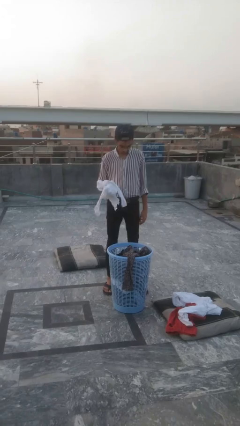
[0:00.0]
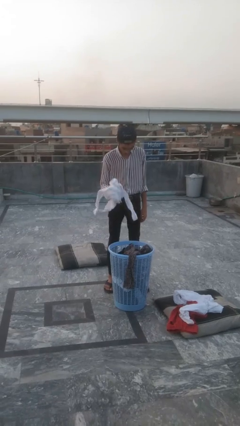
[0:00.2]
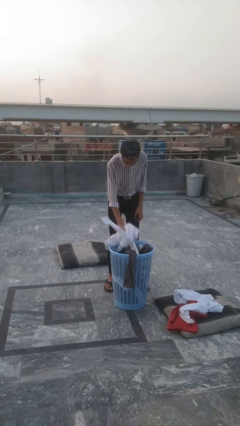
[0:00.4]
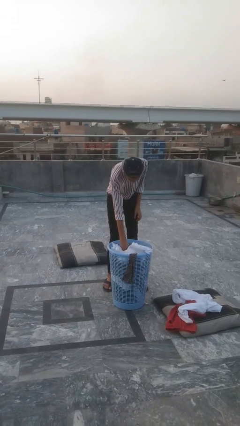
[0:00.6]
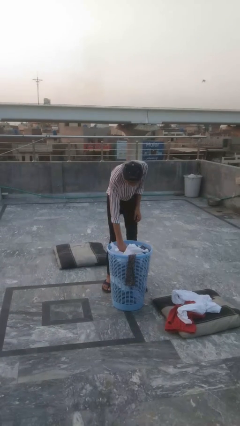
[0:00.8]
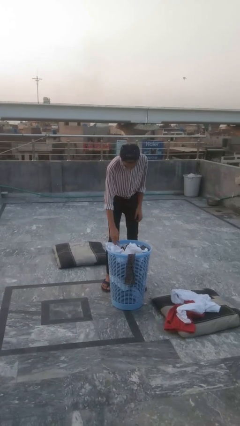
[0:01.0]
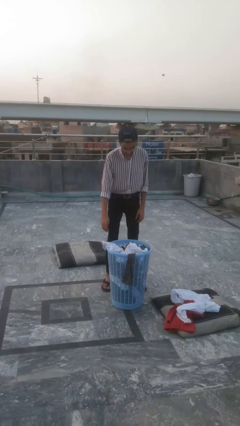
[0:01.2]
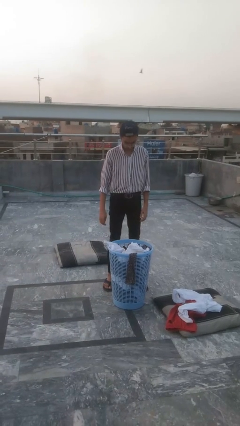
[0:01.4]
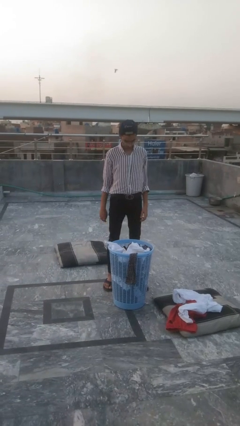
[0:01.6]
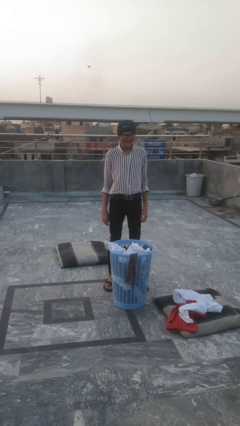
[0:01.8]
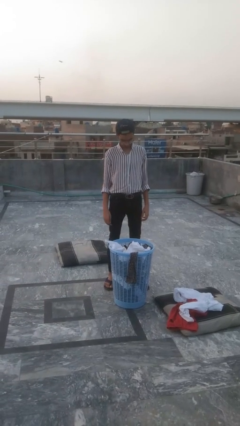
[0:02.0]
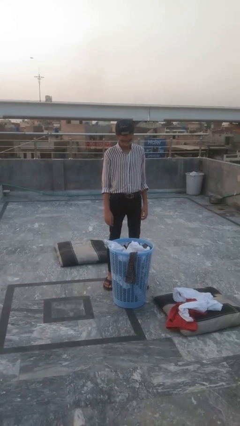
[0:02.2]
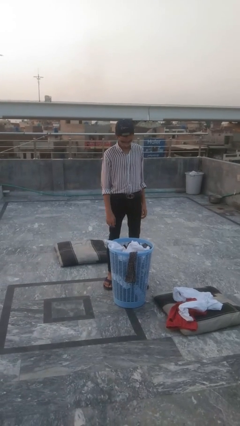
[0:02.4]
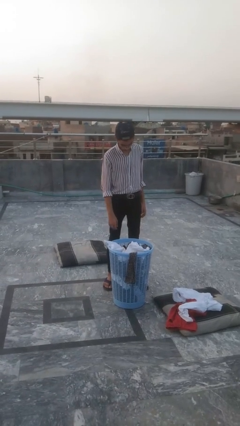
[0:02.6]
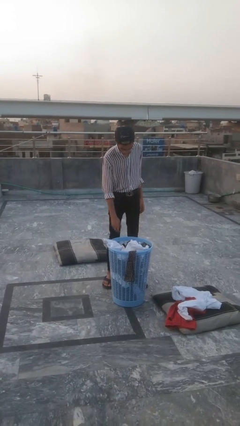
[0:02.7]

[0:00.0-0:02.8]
person puts object into basket

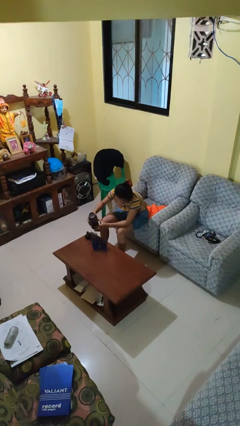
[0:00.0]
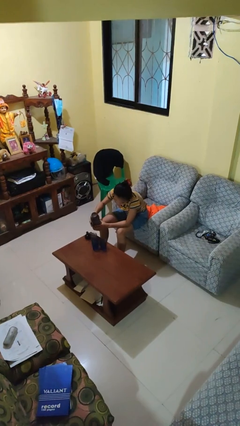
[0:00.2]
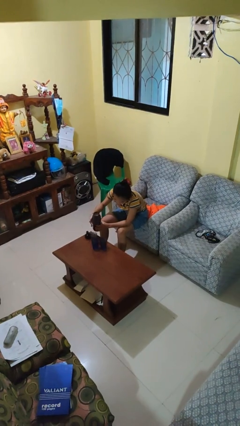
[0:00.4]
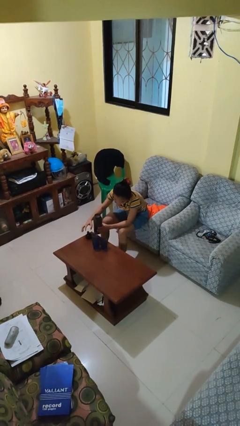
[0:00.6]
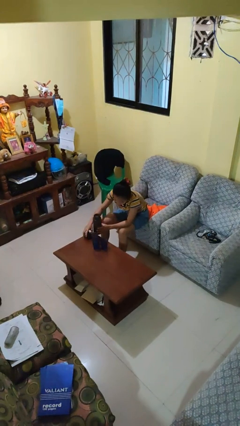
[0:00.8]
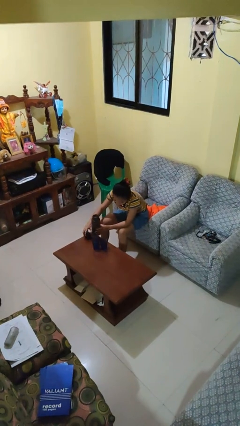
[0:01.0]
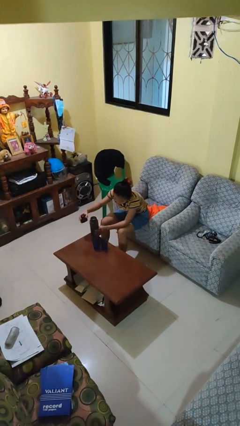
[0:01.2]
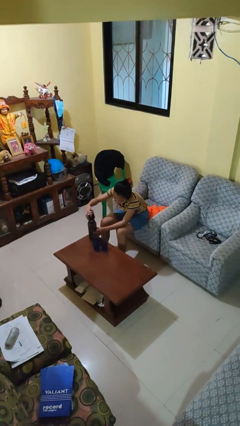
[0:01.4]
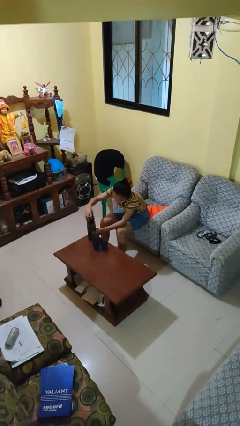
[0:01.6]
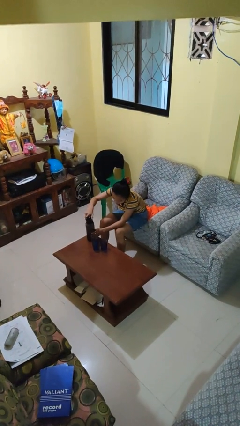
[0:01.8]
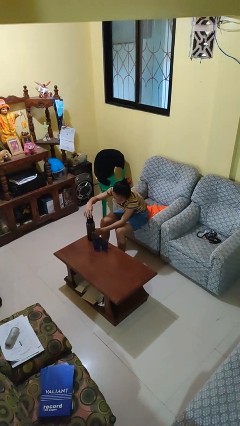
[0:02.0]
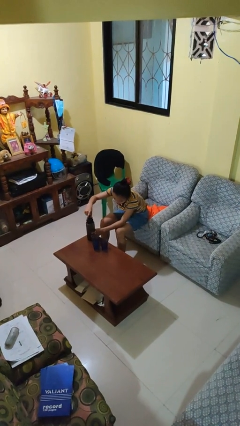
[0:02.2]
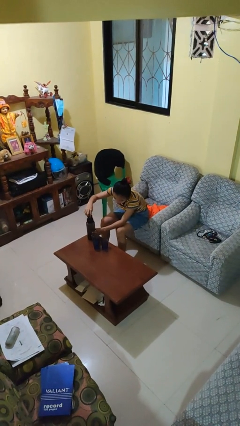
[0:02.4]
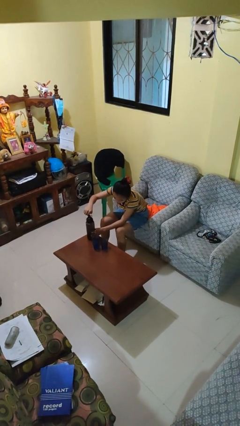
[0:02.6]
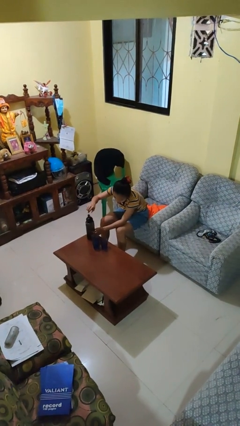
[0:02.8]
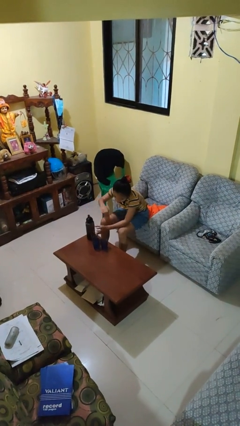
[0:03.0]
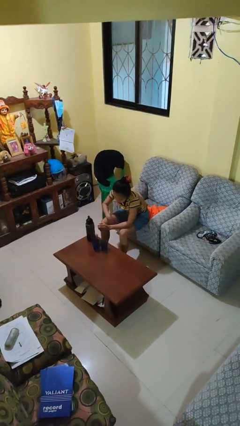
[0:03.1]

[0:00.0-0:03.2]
person screws lid to bottle

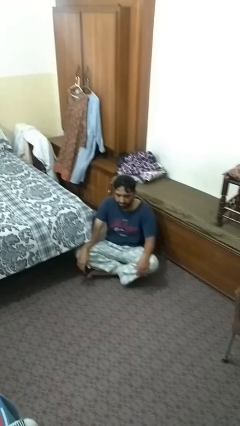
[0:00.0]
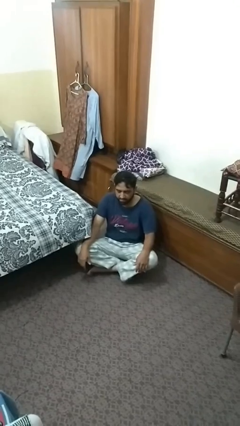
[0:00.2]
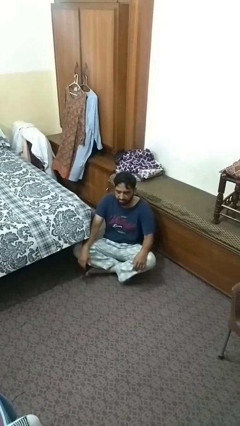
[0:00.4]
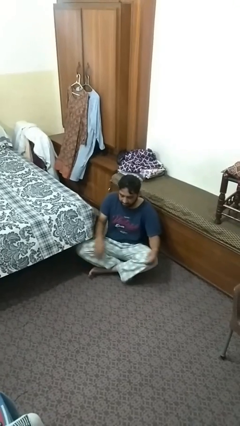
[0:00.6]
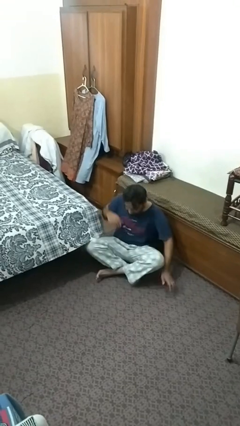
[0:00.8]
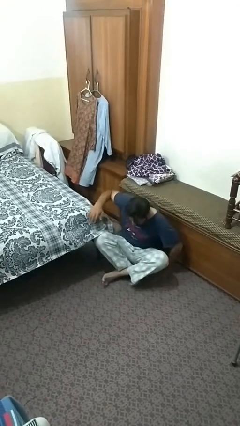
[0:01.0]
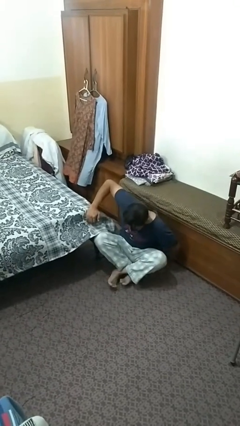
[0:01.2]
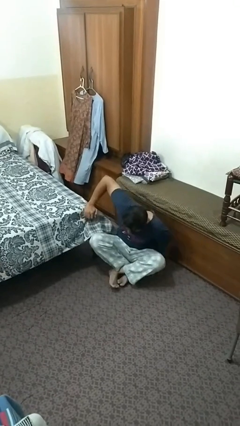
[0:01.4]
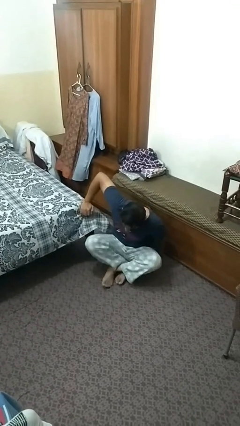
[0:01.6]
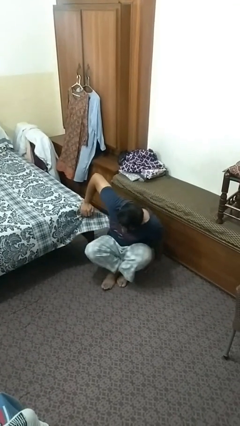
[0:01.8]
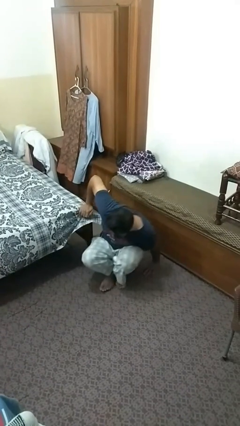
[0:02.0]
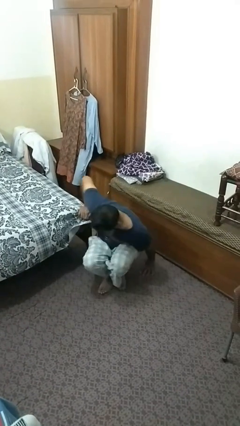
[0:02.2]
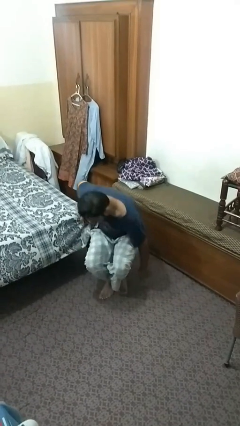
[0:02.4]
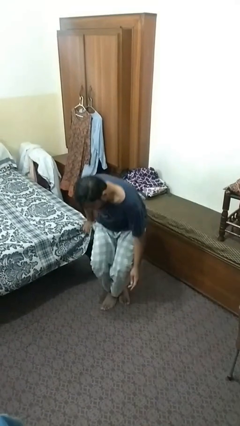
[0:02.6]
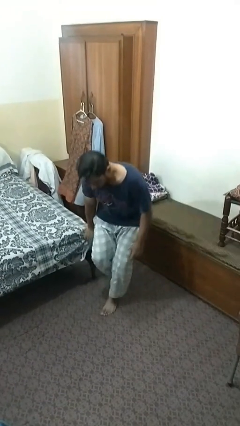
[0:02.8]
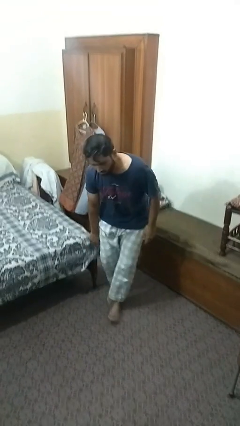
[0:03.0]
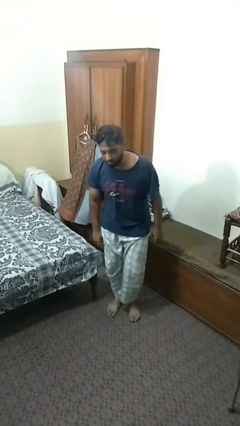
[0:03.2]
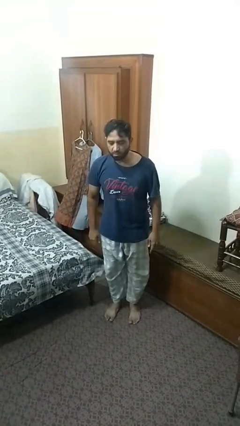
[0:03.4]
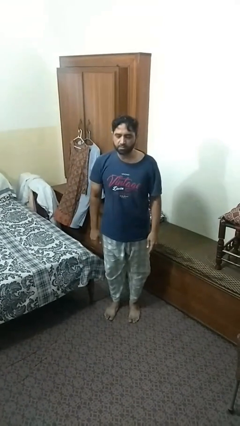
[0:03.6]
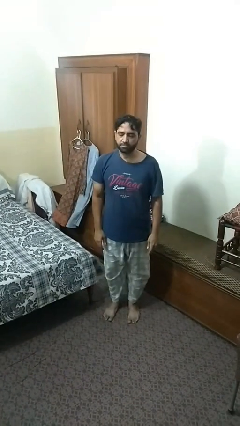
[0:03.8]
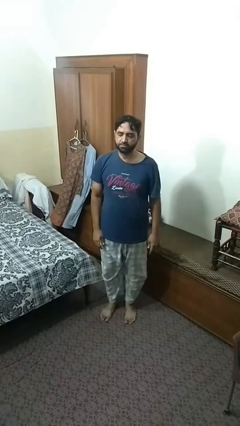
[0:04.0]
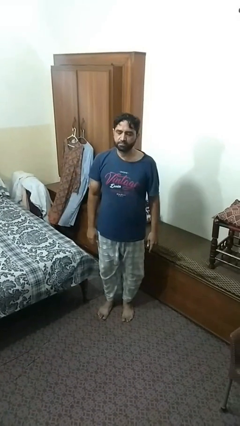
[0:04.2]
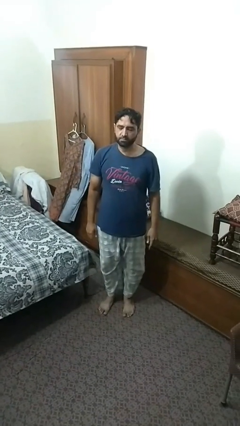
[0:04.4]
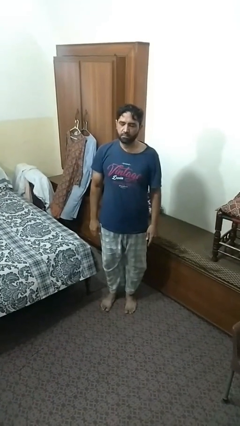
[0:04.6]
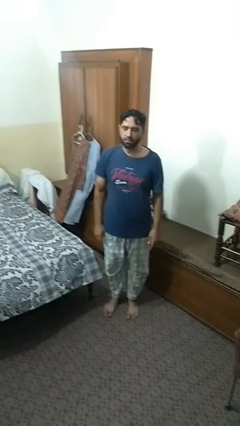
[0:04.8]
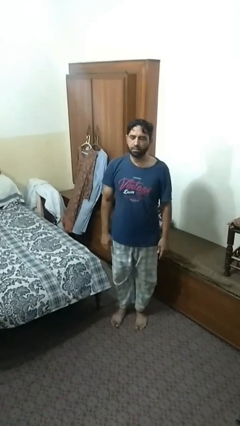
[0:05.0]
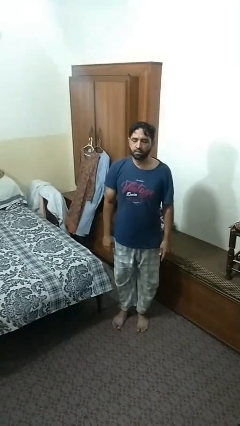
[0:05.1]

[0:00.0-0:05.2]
person stands up from floor

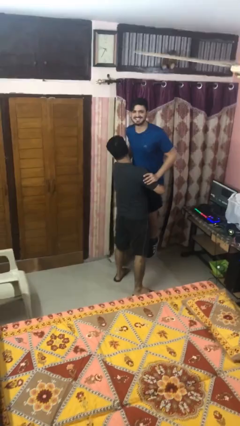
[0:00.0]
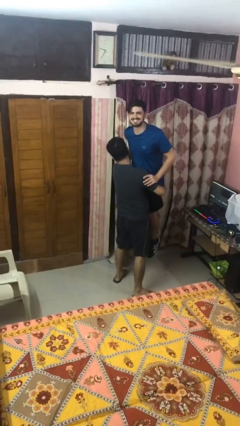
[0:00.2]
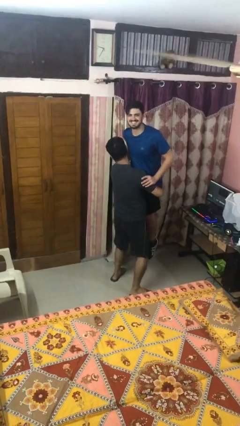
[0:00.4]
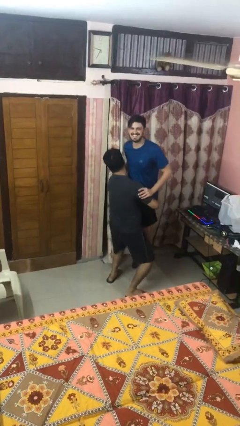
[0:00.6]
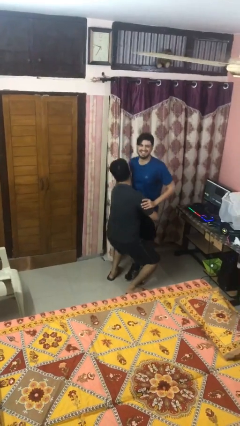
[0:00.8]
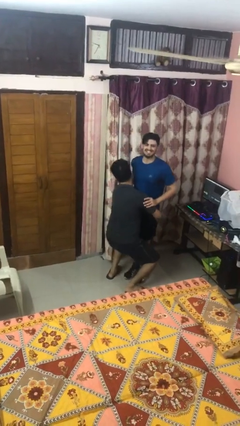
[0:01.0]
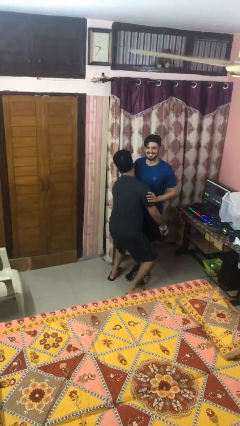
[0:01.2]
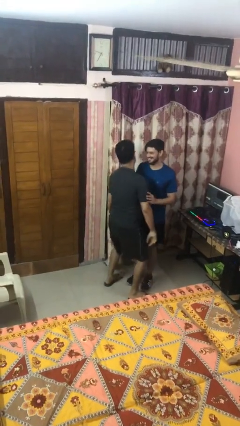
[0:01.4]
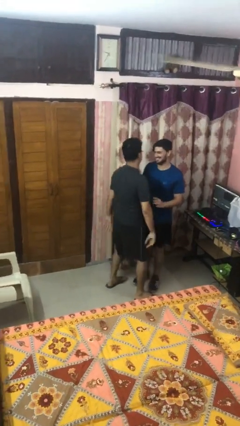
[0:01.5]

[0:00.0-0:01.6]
person puts down person

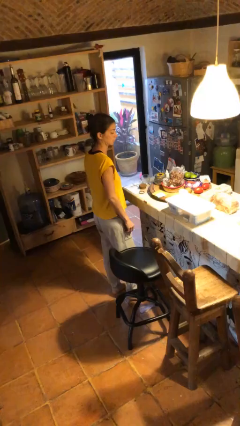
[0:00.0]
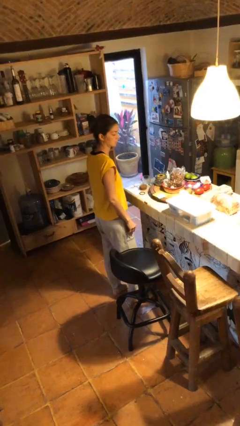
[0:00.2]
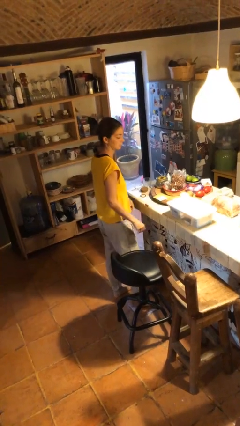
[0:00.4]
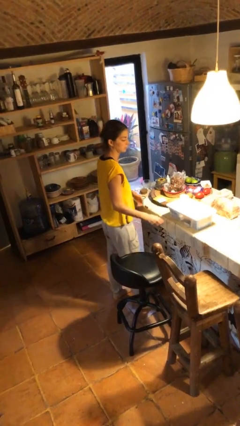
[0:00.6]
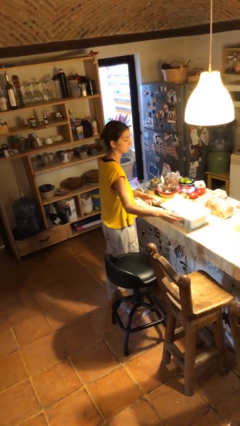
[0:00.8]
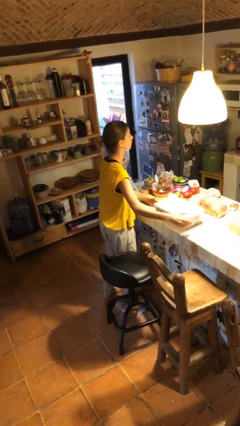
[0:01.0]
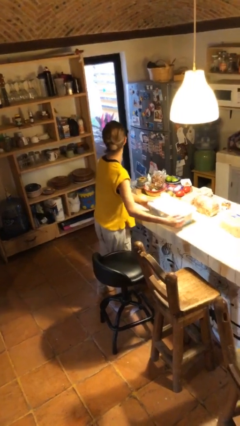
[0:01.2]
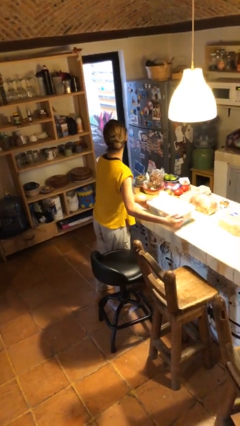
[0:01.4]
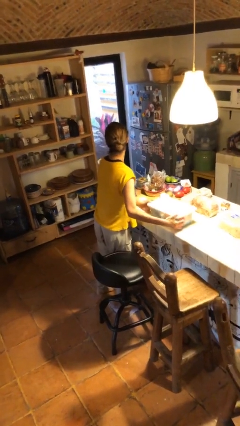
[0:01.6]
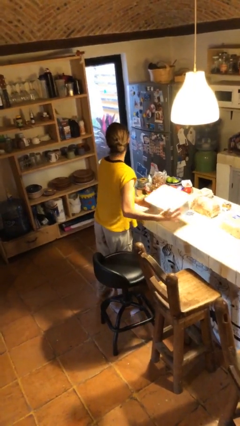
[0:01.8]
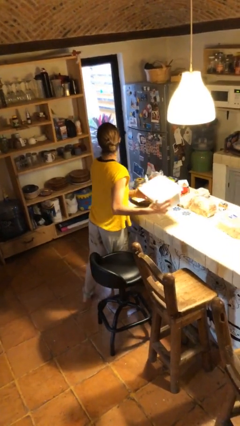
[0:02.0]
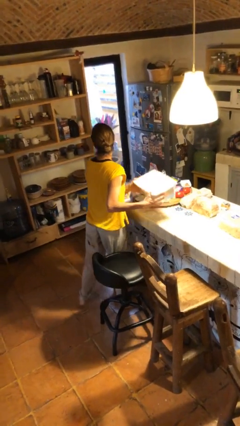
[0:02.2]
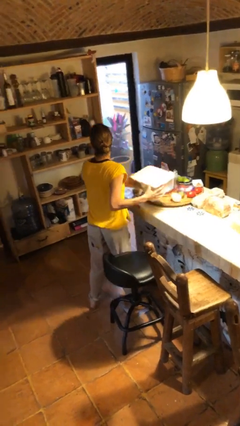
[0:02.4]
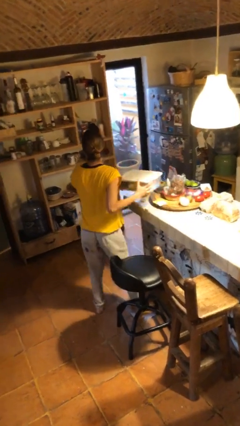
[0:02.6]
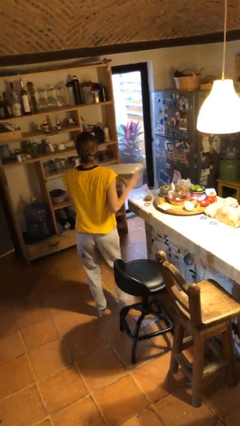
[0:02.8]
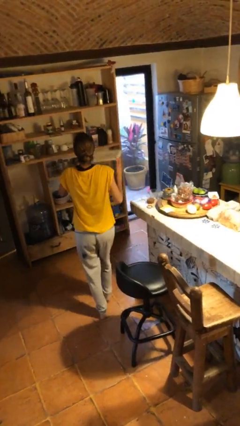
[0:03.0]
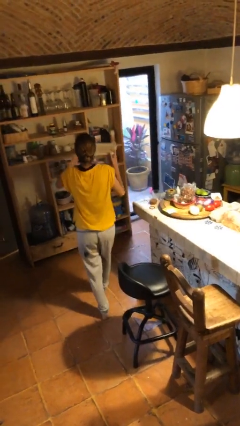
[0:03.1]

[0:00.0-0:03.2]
person picks up object from table

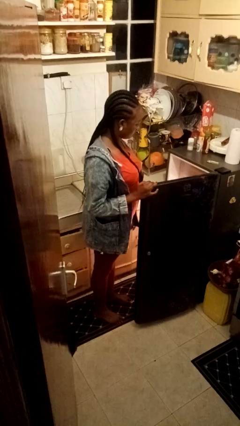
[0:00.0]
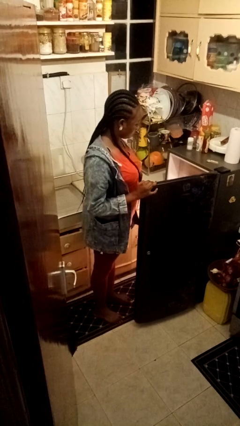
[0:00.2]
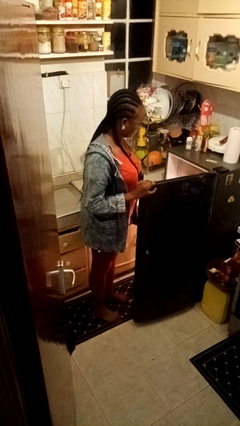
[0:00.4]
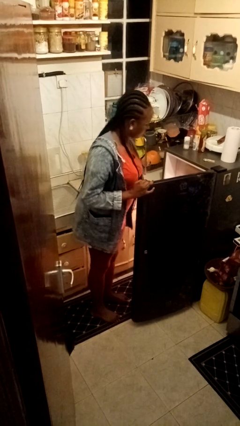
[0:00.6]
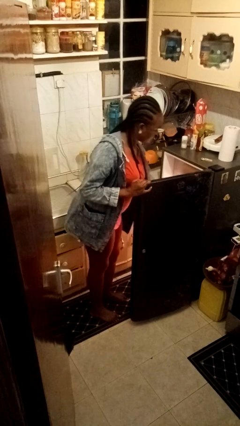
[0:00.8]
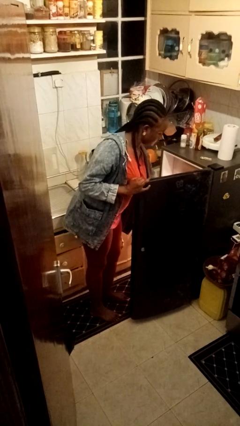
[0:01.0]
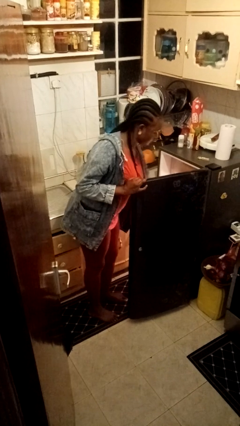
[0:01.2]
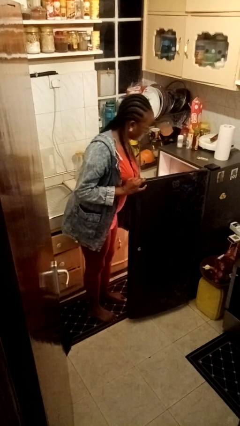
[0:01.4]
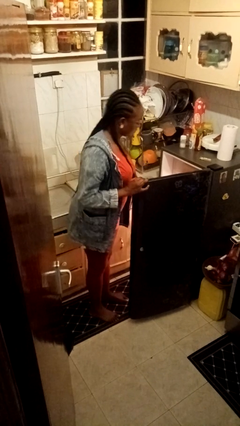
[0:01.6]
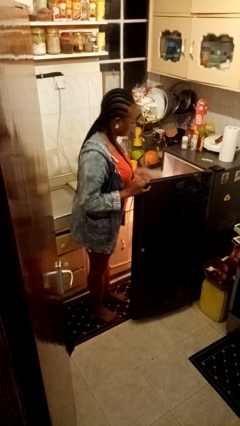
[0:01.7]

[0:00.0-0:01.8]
person takes object from refrigerator
